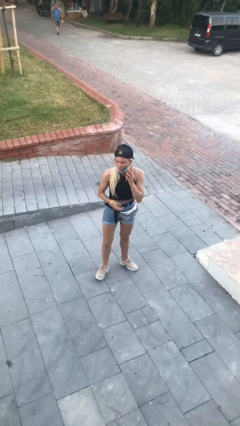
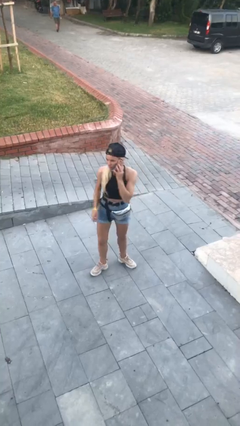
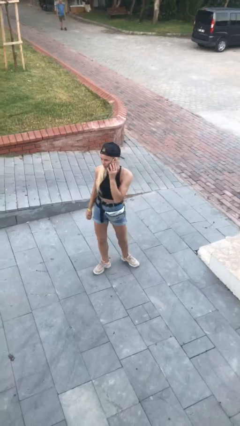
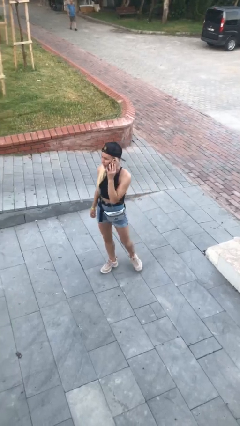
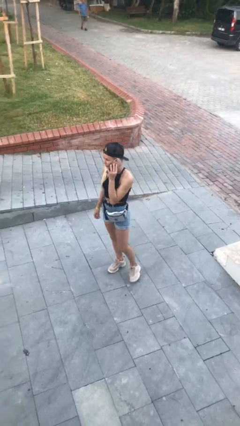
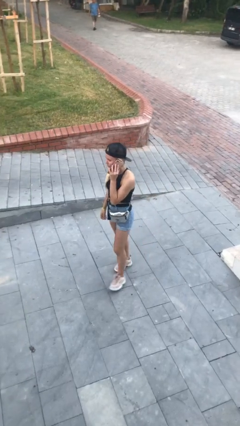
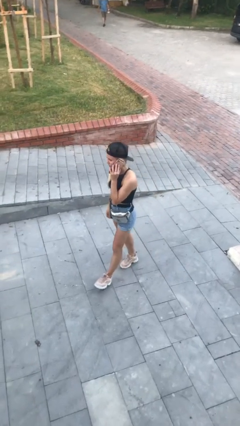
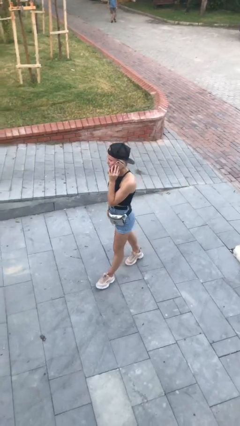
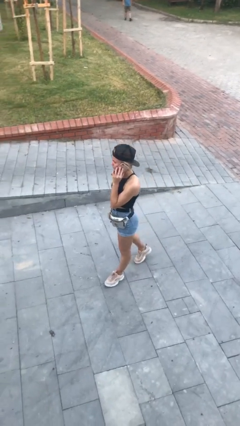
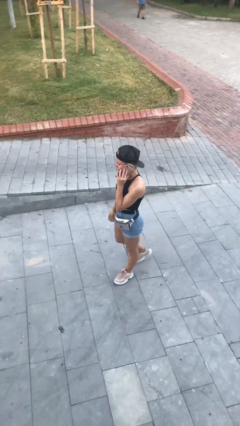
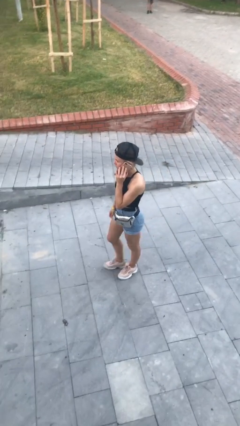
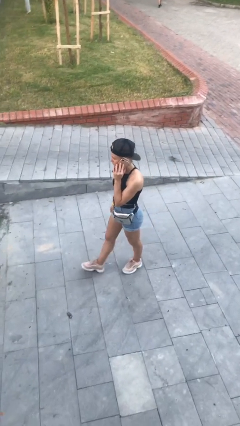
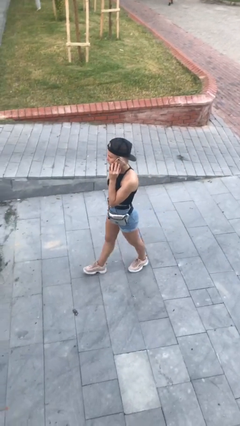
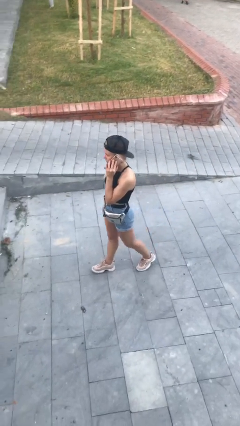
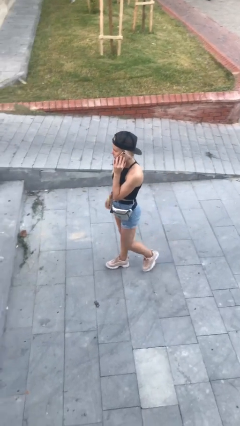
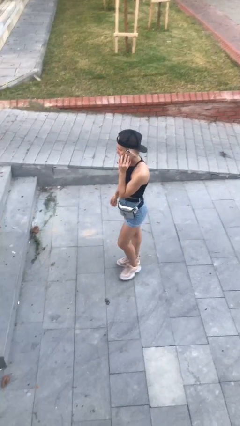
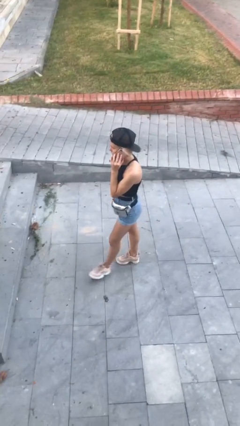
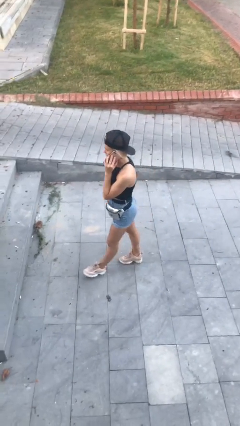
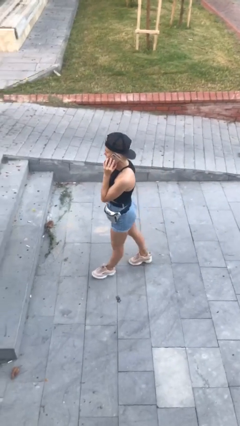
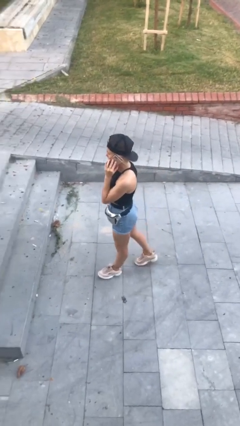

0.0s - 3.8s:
person talks on phone

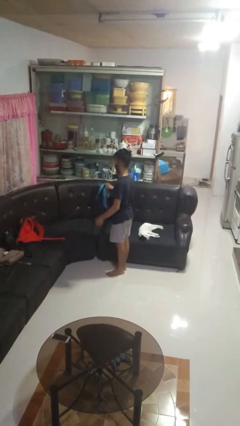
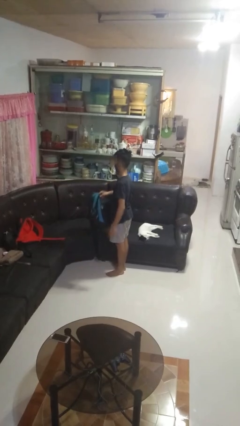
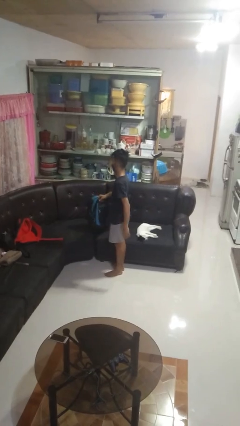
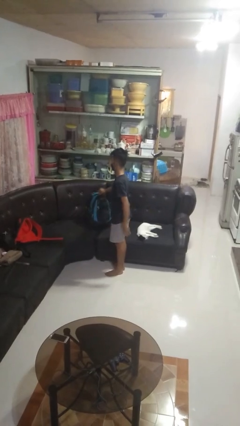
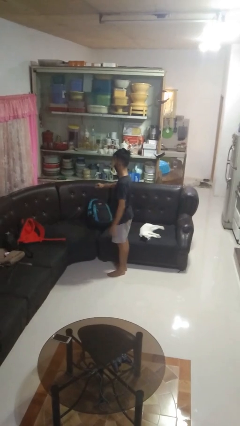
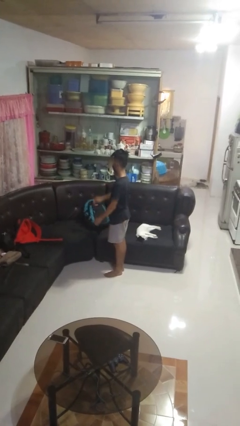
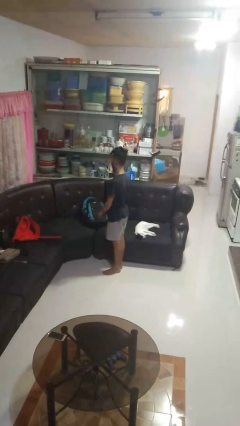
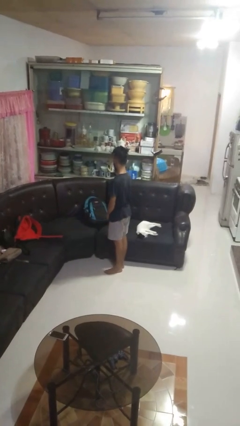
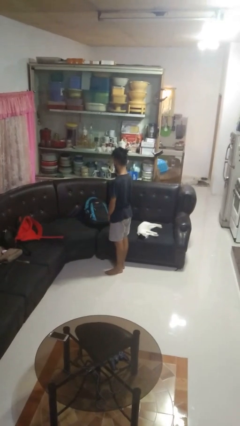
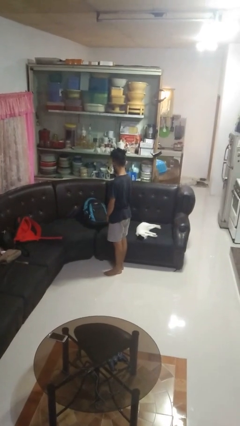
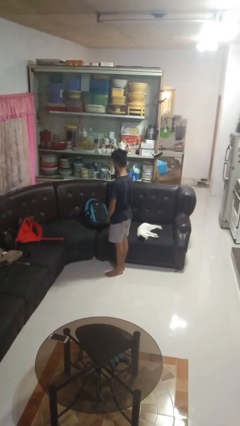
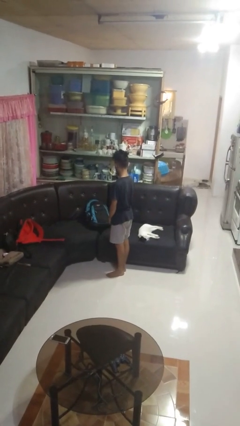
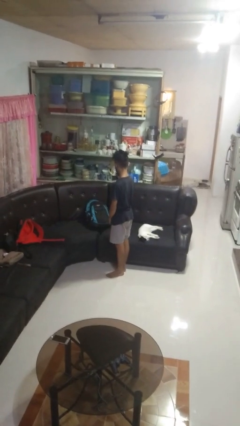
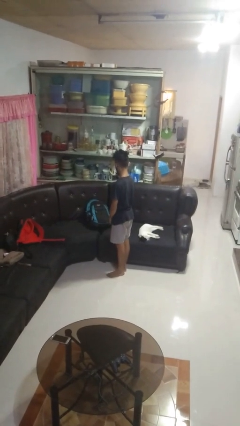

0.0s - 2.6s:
person puts down object on couch

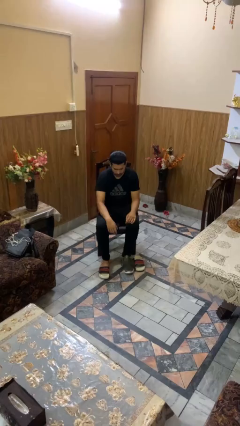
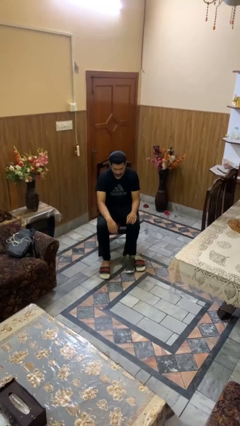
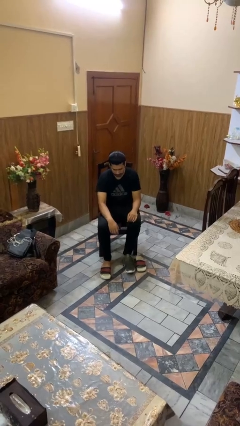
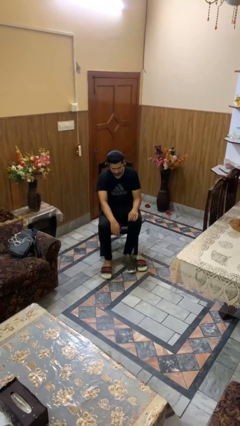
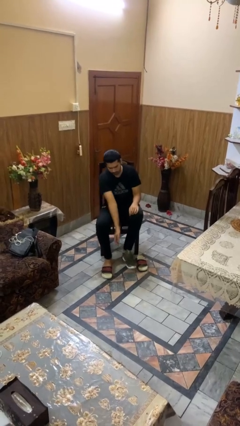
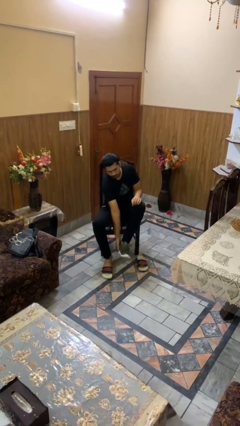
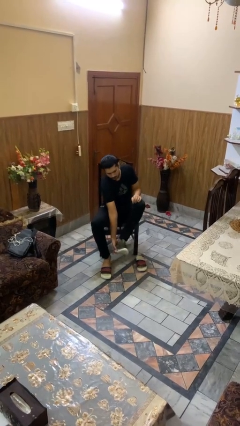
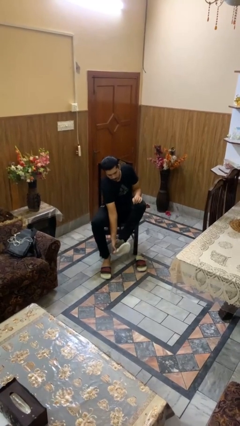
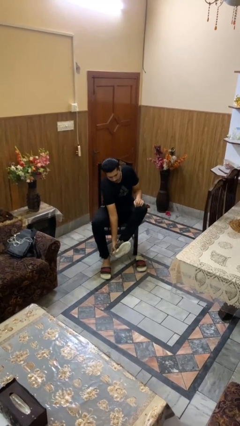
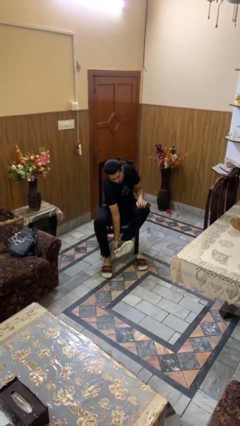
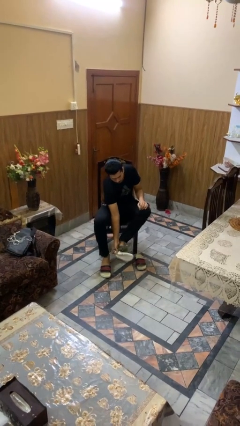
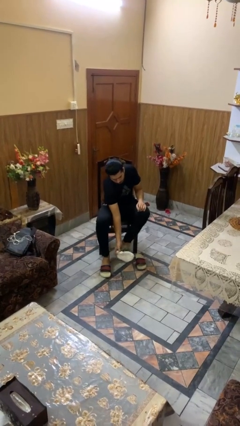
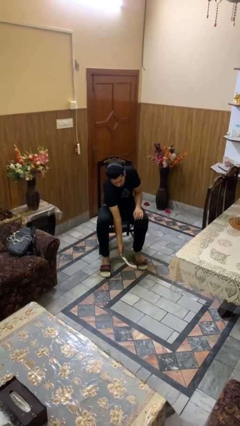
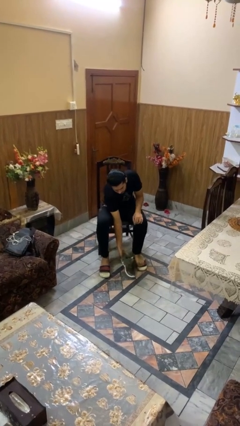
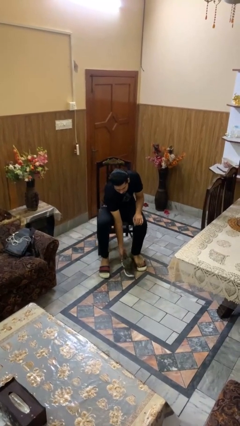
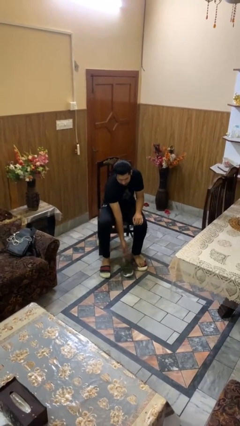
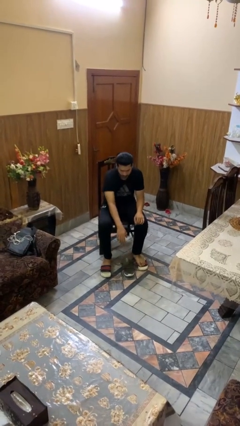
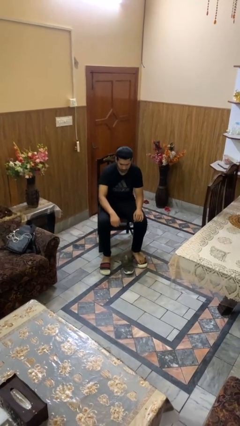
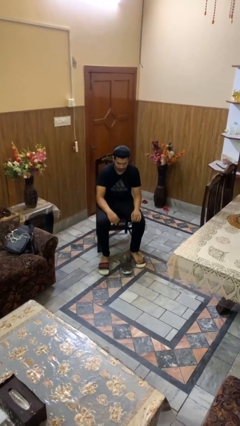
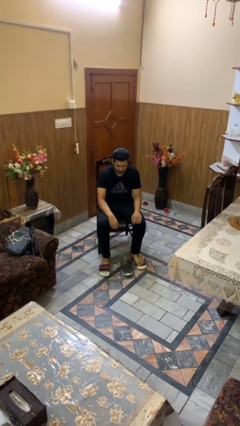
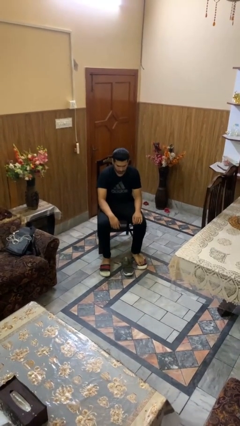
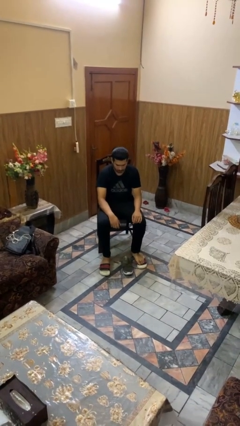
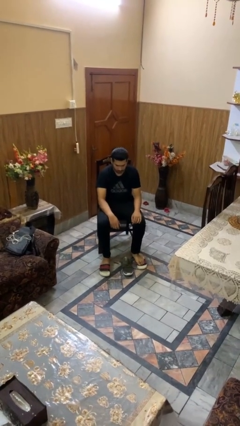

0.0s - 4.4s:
person takes off shoes

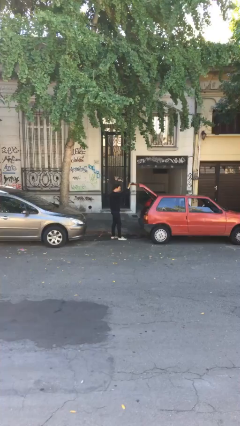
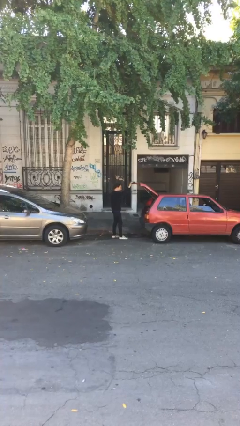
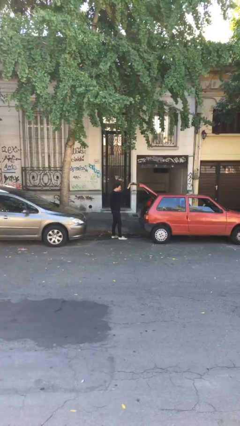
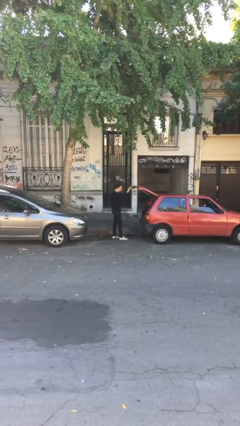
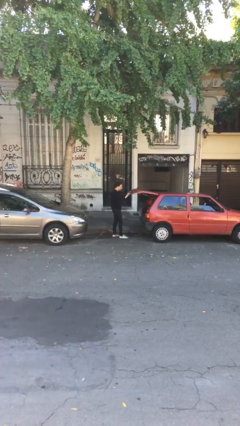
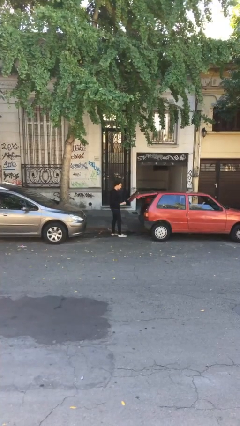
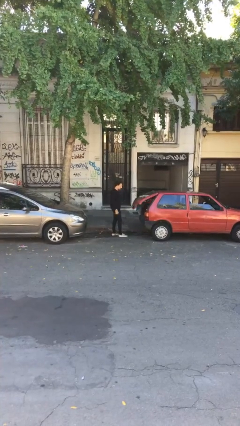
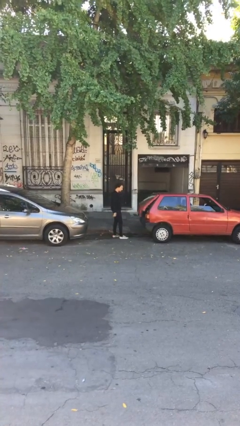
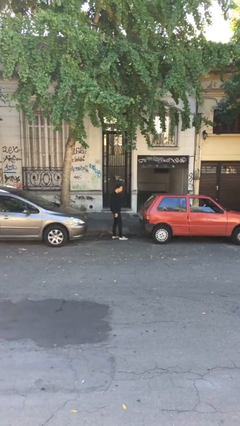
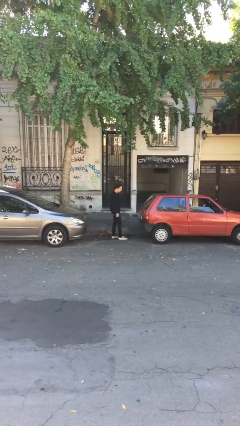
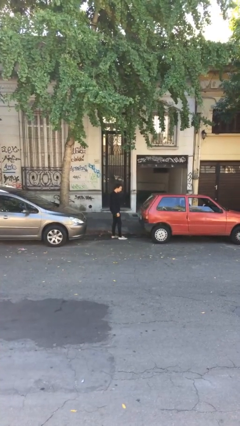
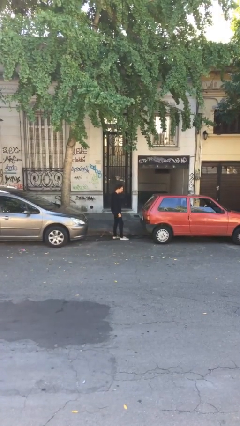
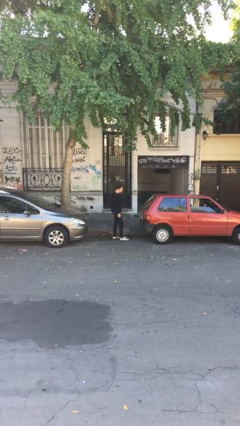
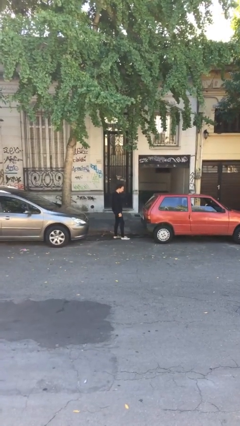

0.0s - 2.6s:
person closes car trunk

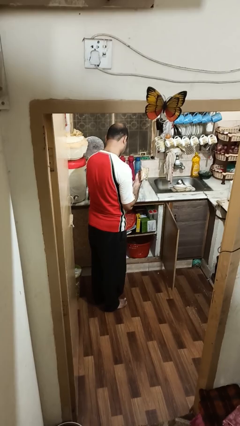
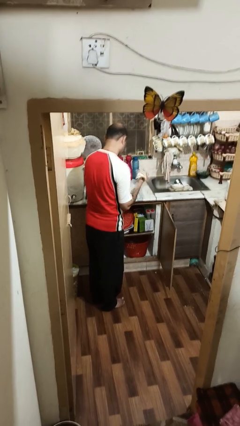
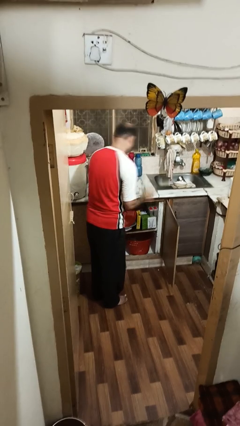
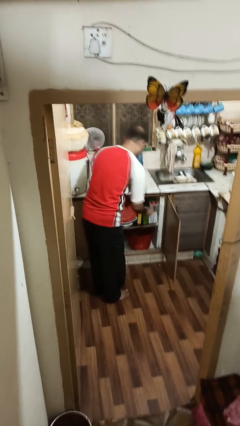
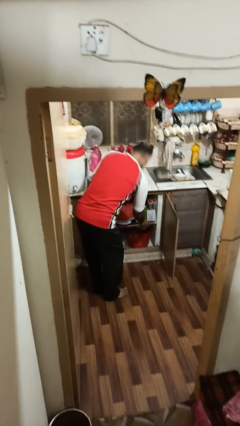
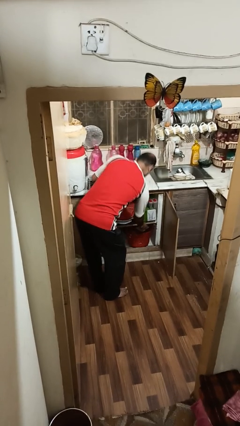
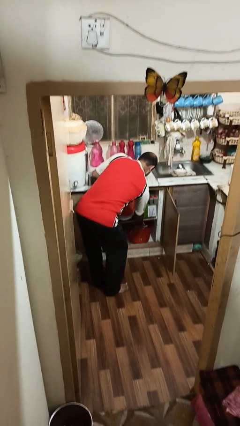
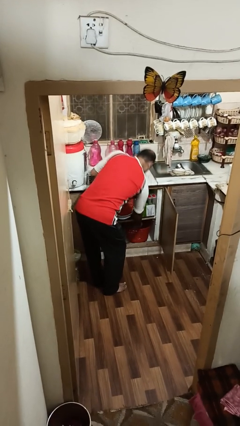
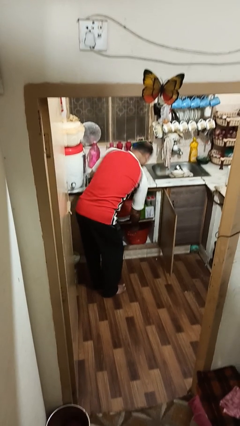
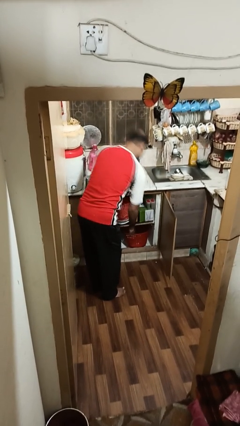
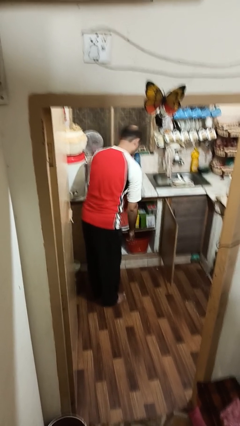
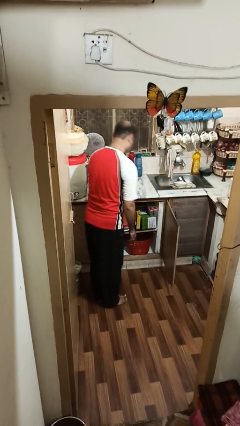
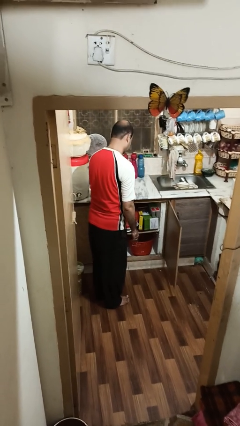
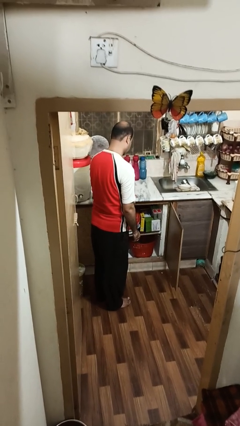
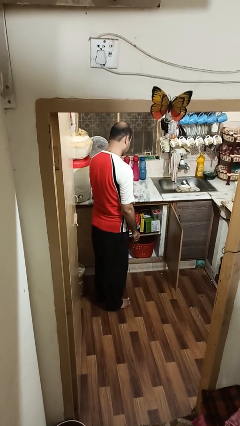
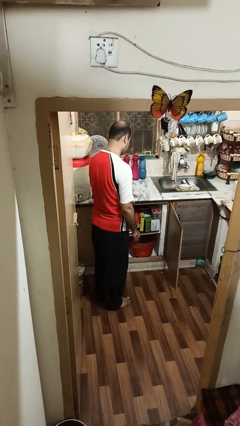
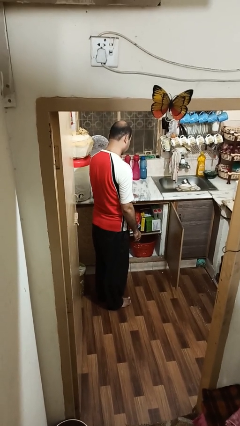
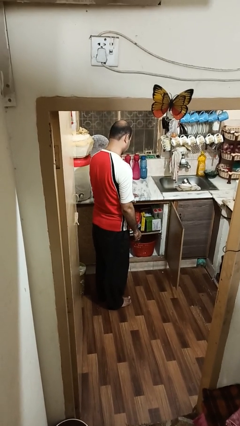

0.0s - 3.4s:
person puts object in cabinet

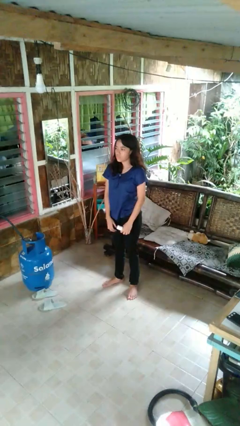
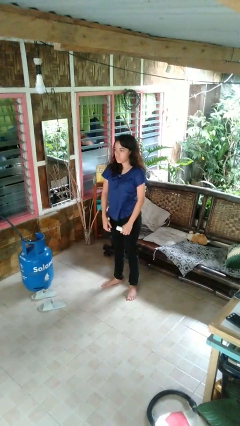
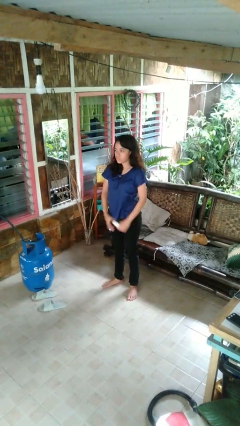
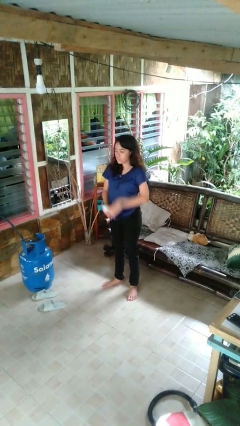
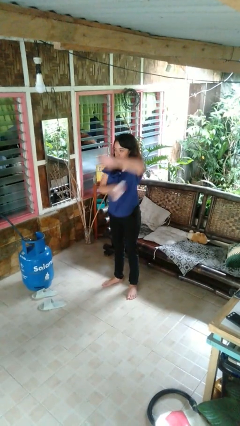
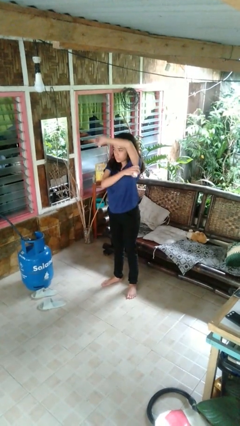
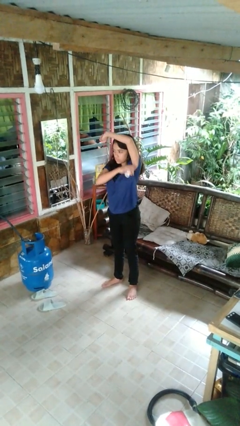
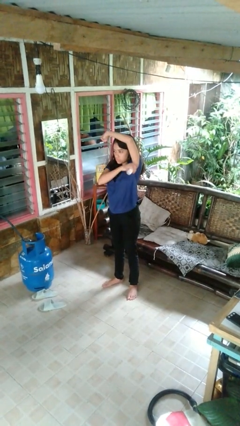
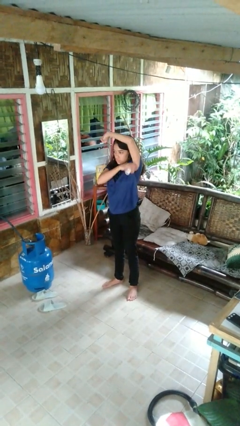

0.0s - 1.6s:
person applies deodorant
